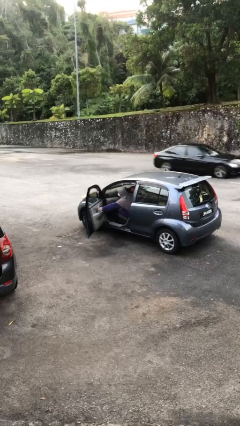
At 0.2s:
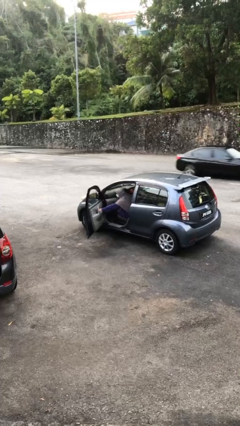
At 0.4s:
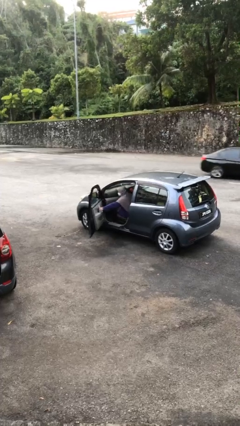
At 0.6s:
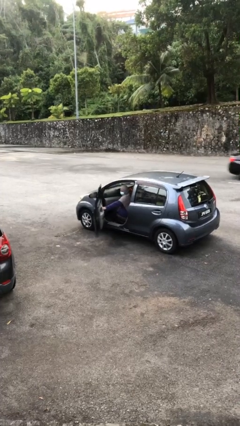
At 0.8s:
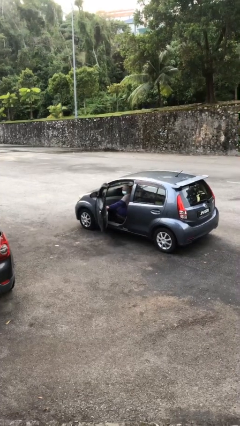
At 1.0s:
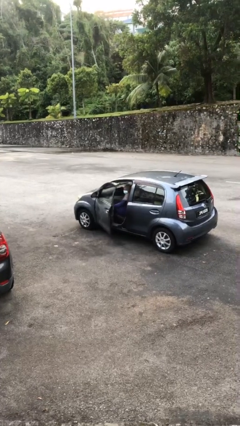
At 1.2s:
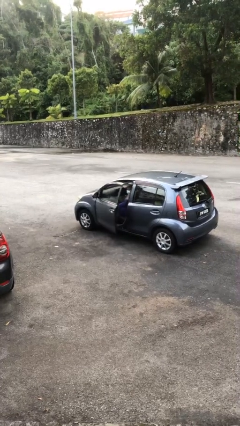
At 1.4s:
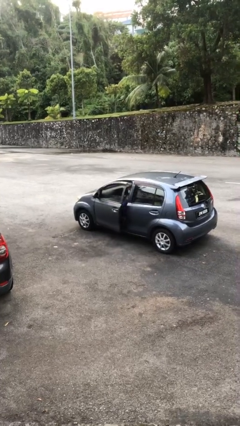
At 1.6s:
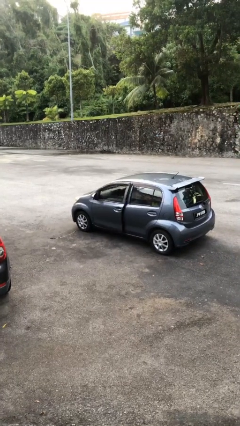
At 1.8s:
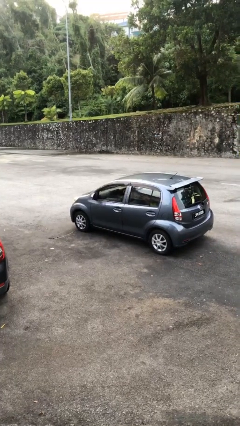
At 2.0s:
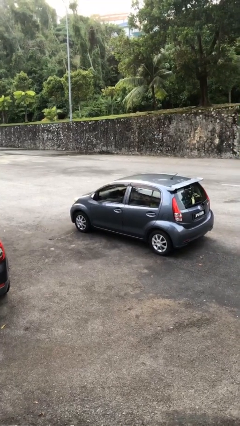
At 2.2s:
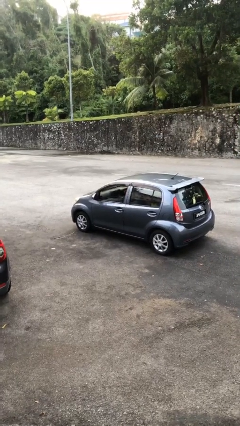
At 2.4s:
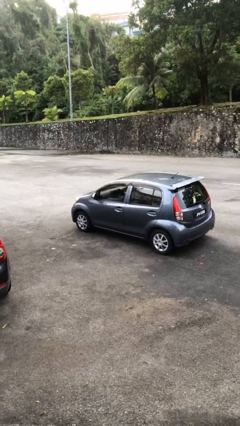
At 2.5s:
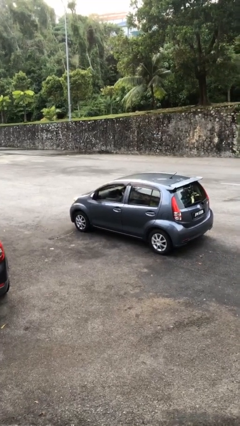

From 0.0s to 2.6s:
person closes car door

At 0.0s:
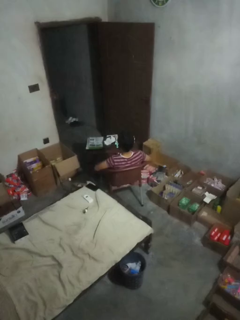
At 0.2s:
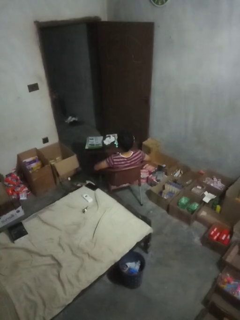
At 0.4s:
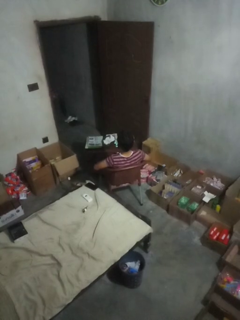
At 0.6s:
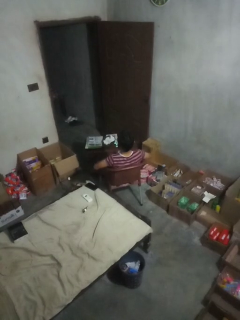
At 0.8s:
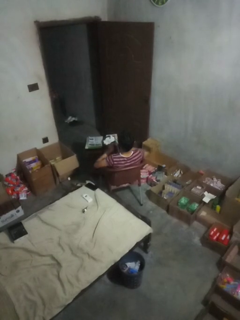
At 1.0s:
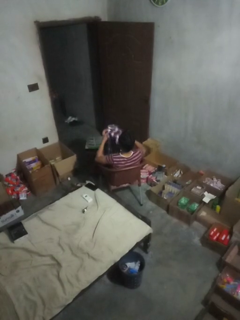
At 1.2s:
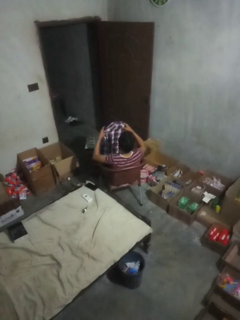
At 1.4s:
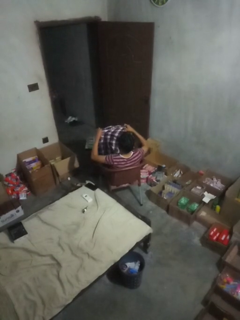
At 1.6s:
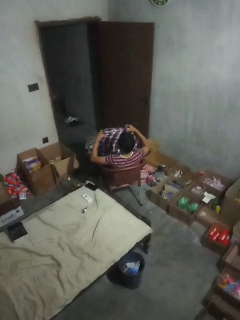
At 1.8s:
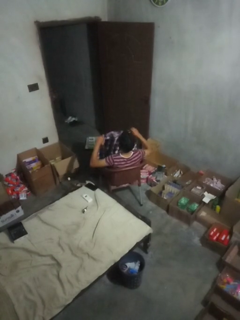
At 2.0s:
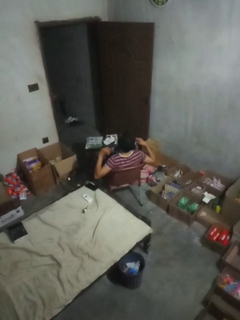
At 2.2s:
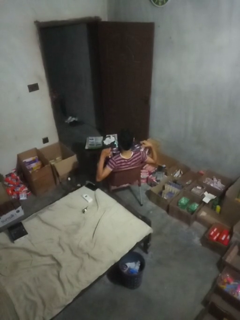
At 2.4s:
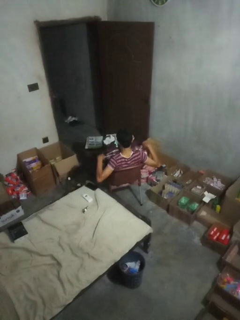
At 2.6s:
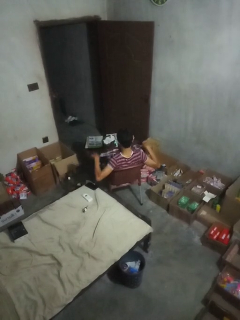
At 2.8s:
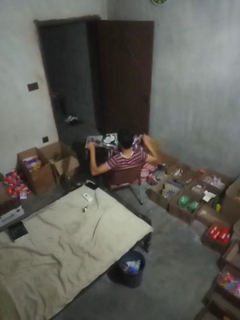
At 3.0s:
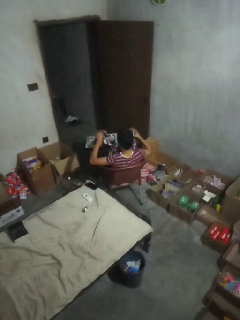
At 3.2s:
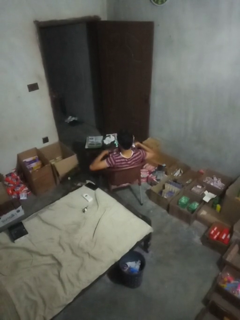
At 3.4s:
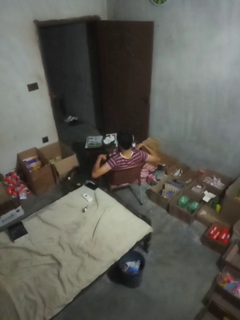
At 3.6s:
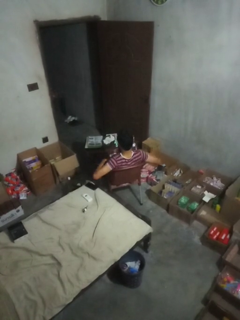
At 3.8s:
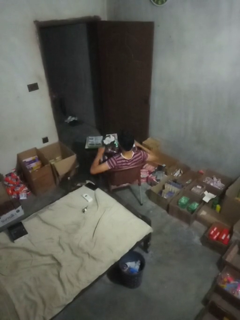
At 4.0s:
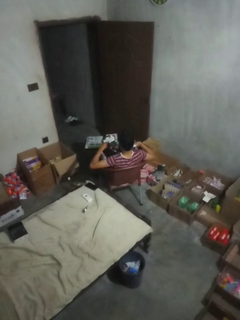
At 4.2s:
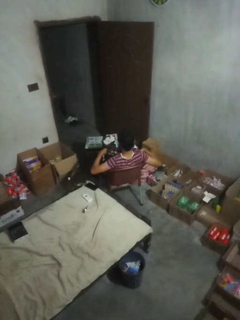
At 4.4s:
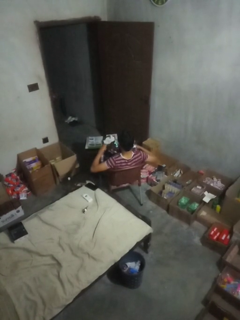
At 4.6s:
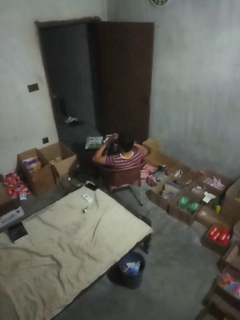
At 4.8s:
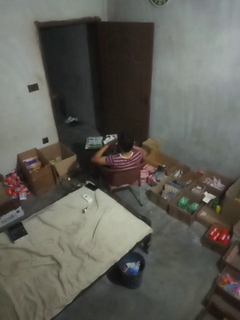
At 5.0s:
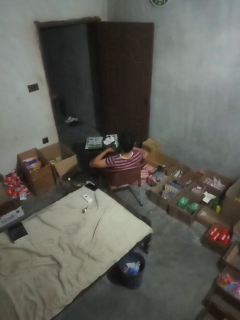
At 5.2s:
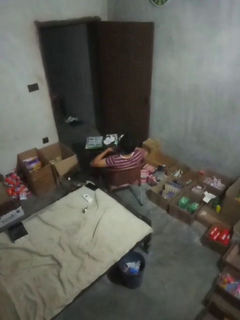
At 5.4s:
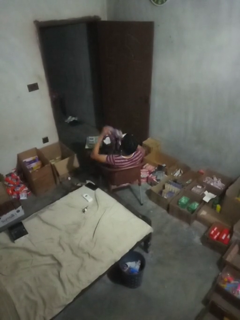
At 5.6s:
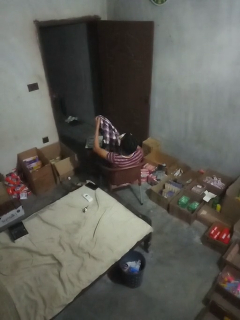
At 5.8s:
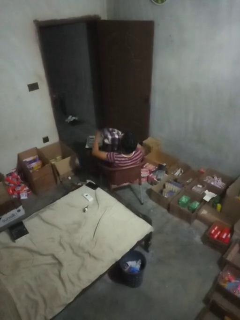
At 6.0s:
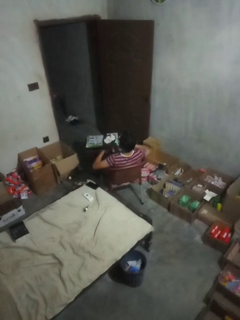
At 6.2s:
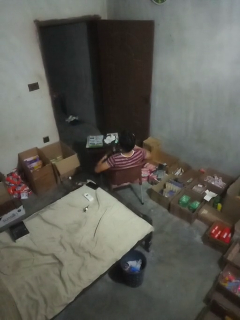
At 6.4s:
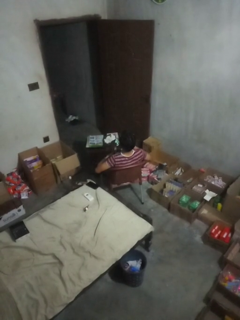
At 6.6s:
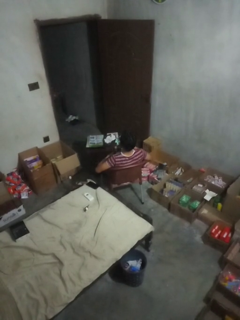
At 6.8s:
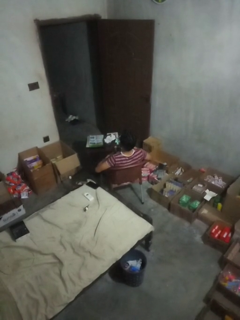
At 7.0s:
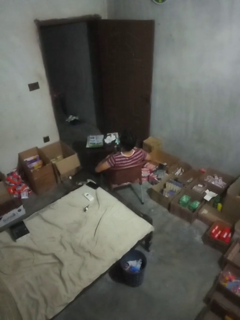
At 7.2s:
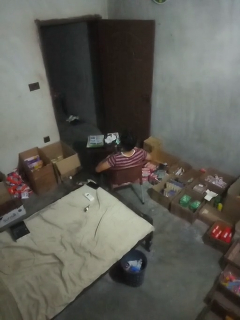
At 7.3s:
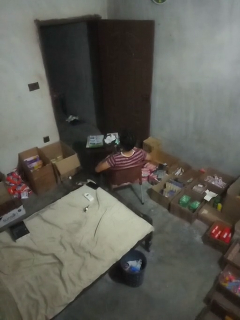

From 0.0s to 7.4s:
person folds shirt

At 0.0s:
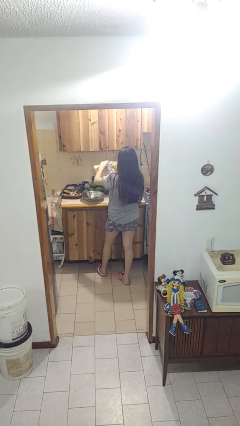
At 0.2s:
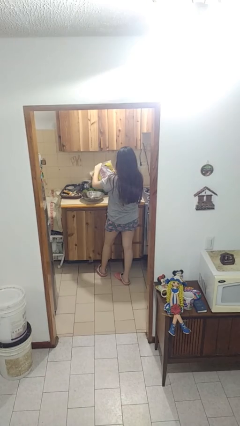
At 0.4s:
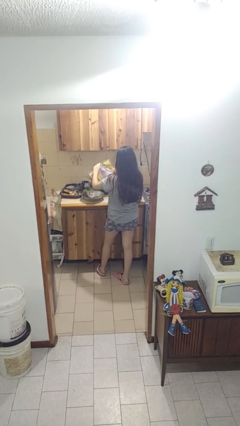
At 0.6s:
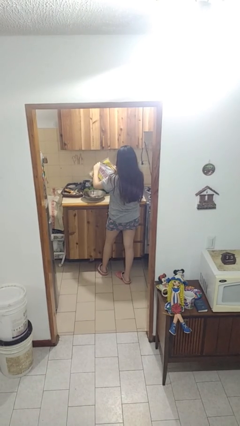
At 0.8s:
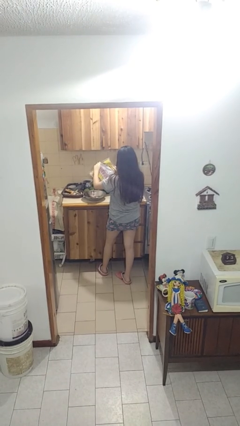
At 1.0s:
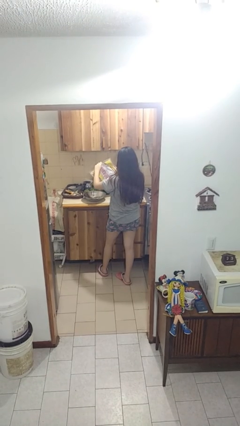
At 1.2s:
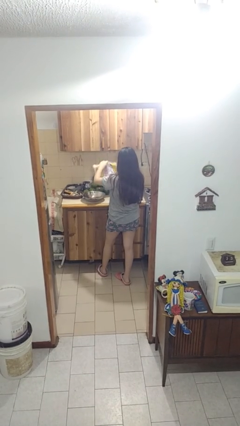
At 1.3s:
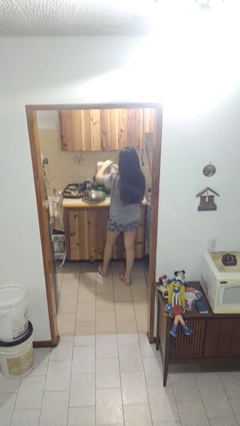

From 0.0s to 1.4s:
person pours into bowl

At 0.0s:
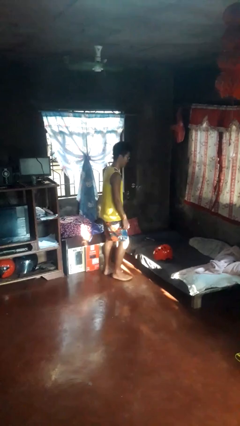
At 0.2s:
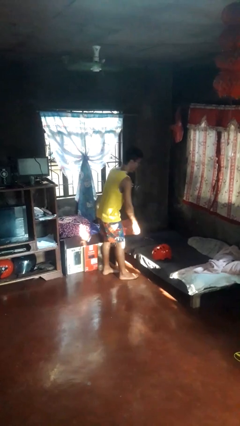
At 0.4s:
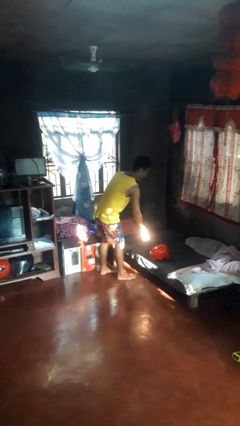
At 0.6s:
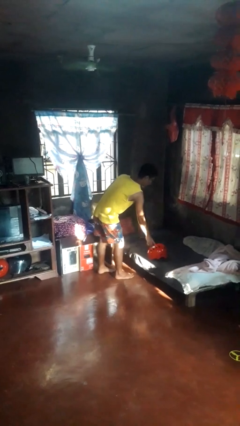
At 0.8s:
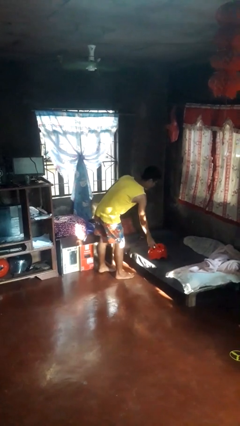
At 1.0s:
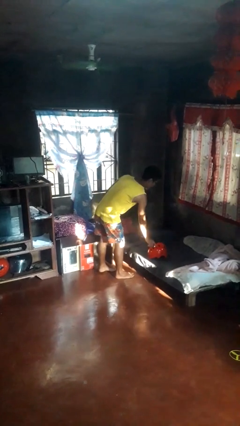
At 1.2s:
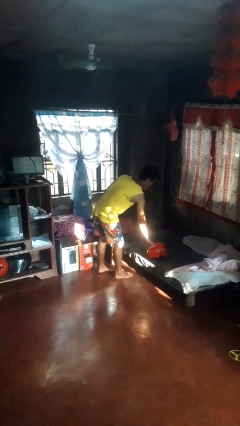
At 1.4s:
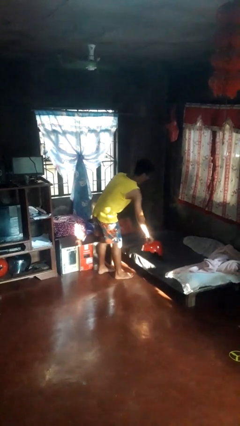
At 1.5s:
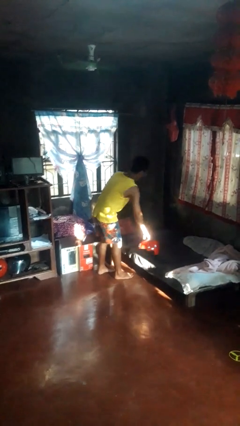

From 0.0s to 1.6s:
person picks up object from bed

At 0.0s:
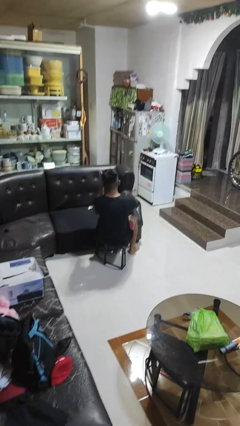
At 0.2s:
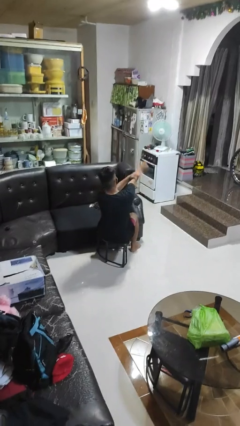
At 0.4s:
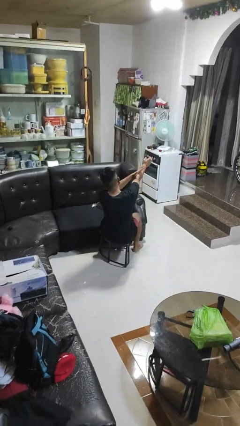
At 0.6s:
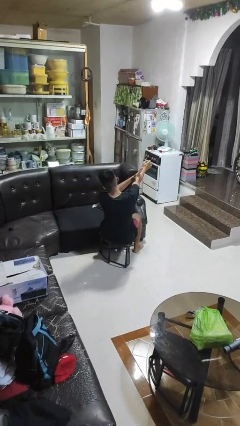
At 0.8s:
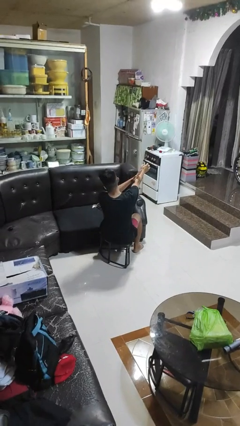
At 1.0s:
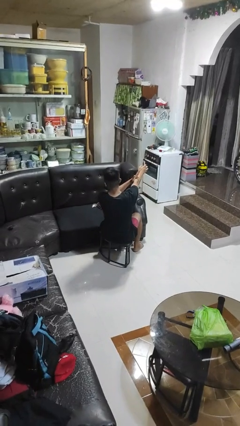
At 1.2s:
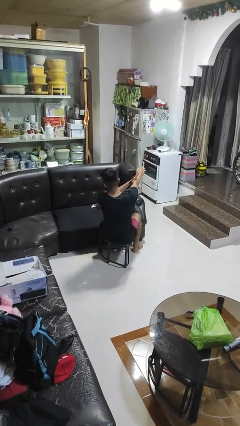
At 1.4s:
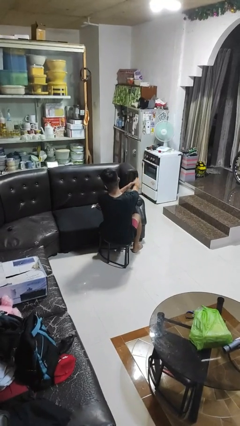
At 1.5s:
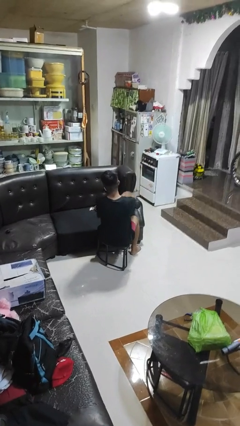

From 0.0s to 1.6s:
person swats bug

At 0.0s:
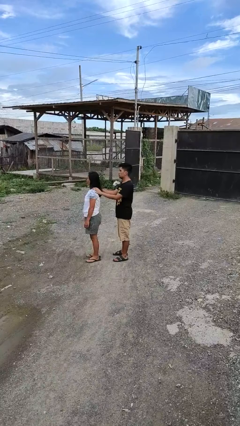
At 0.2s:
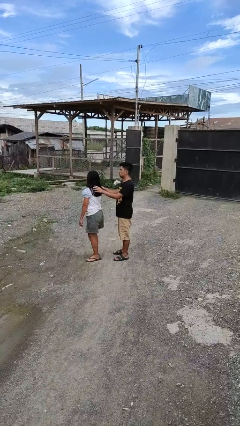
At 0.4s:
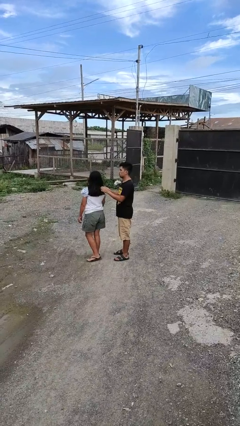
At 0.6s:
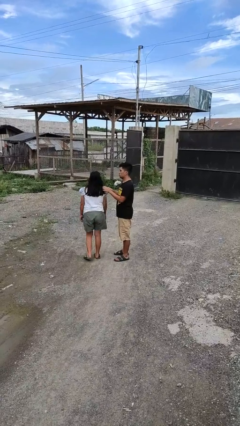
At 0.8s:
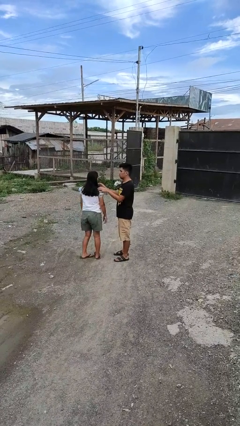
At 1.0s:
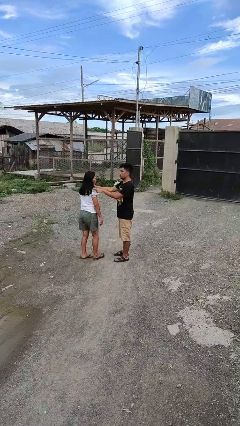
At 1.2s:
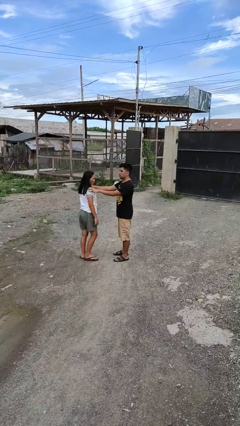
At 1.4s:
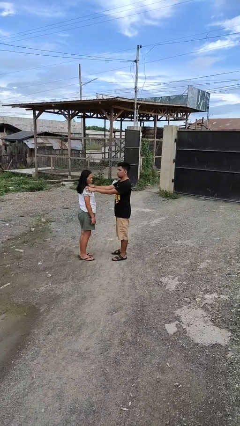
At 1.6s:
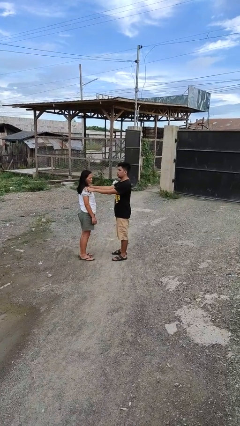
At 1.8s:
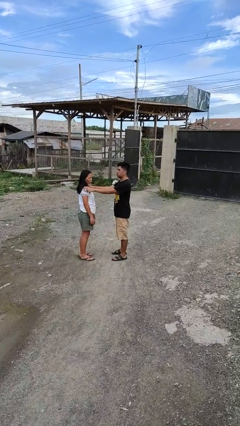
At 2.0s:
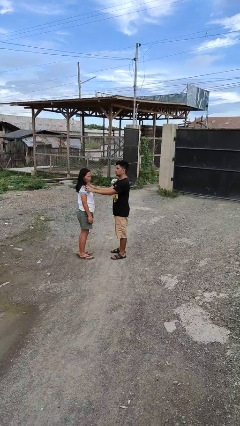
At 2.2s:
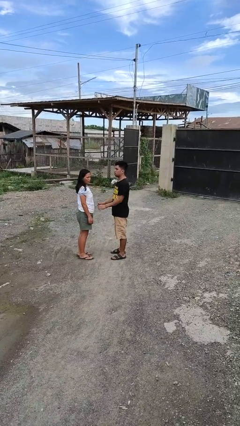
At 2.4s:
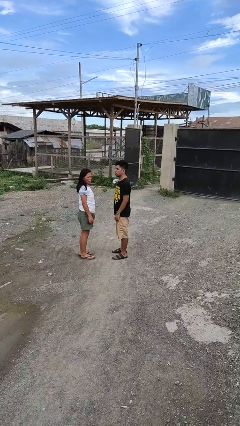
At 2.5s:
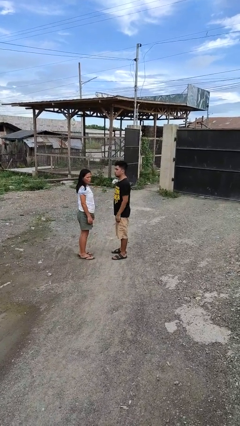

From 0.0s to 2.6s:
person spins person around

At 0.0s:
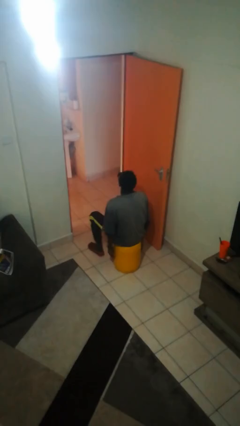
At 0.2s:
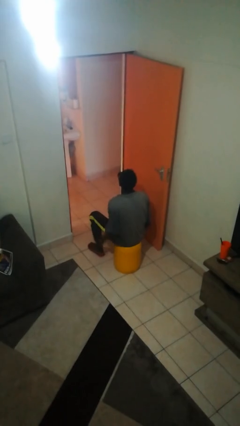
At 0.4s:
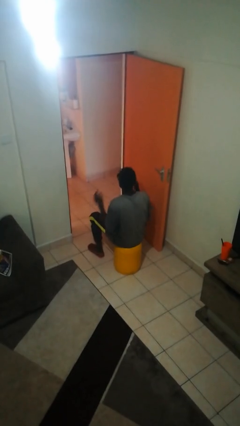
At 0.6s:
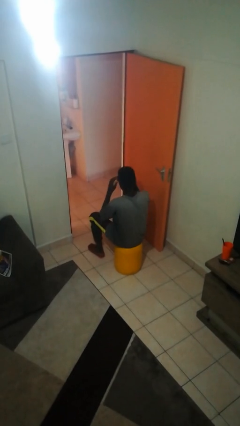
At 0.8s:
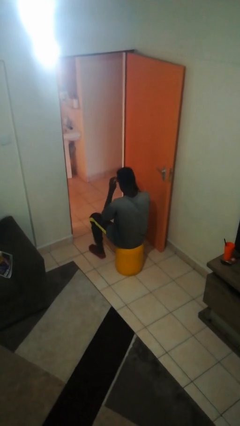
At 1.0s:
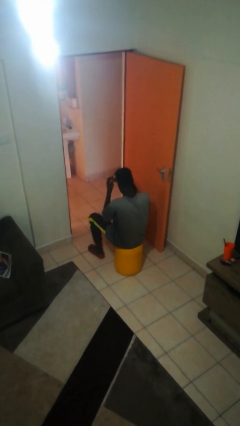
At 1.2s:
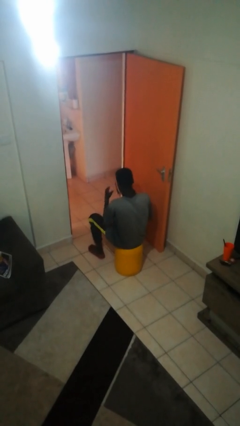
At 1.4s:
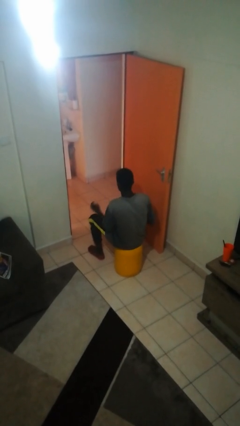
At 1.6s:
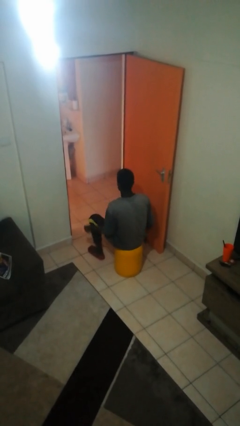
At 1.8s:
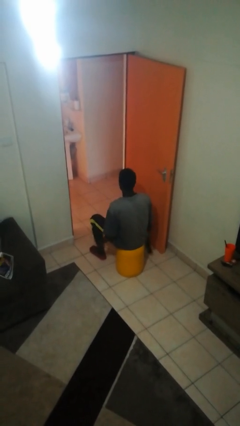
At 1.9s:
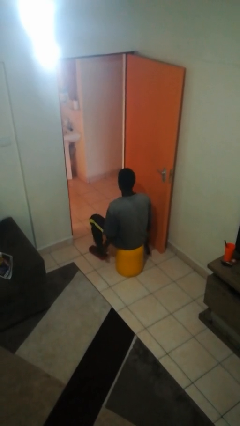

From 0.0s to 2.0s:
person takes off sunglasses
